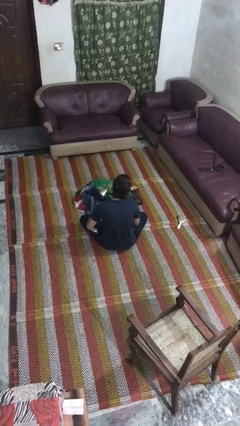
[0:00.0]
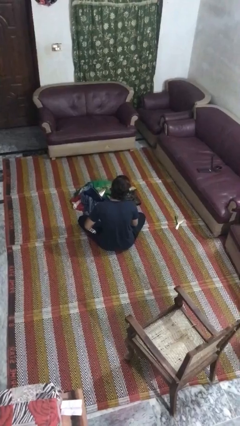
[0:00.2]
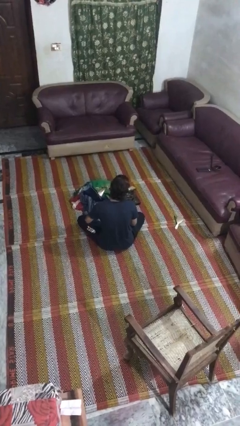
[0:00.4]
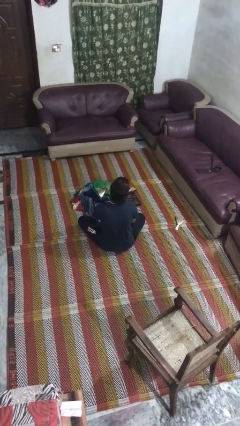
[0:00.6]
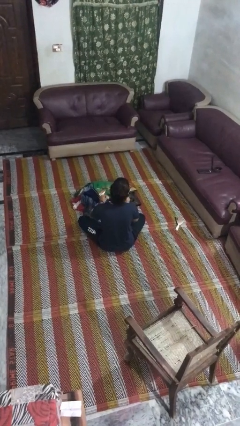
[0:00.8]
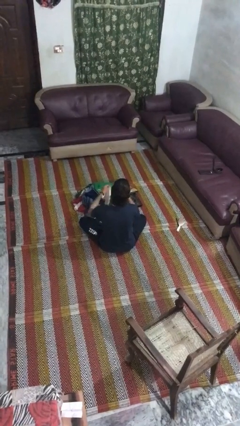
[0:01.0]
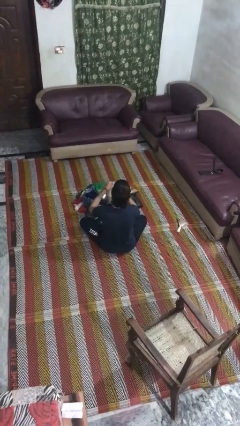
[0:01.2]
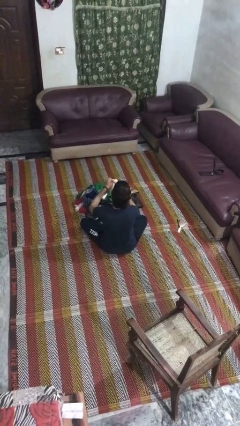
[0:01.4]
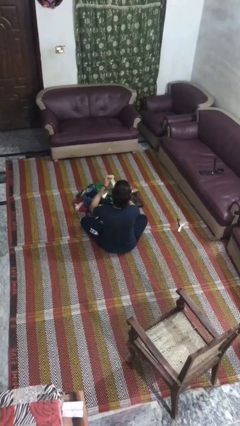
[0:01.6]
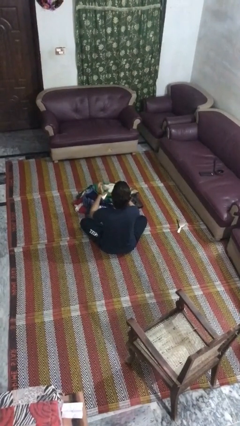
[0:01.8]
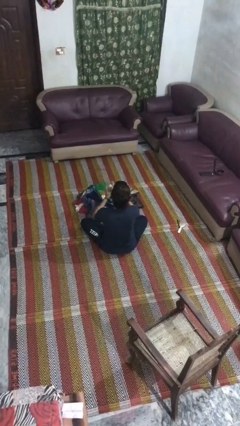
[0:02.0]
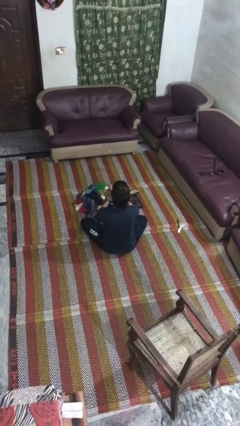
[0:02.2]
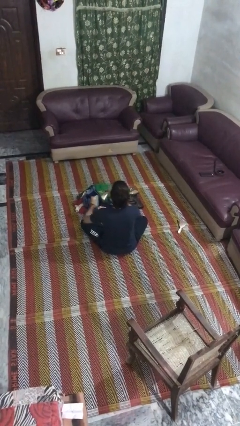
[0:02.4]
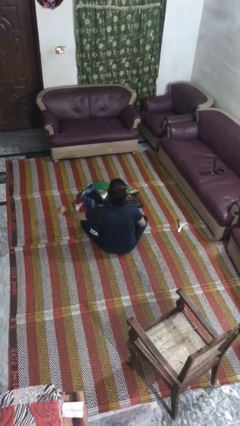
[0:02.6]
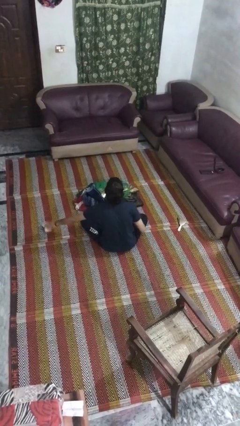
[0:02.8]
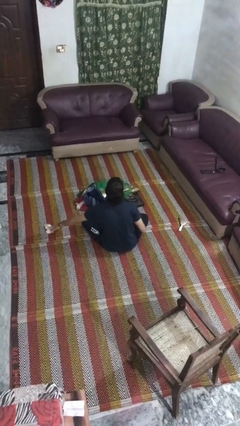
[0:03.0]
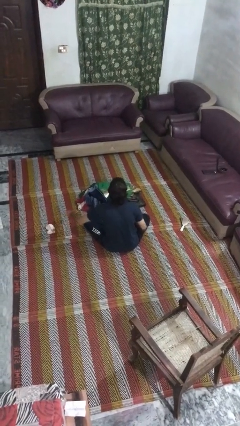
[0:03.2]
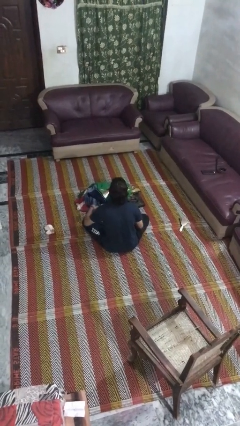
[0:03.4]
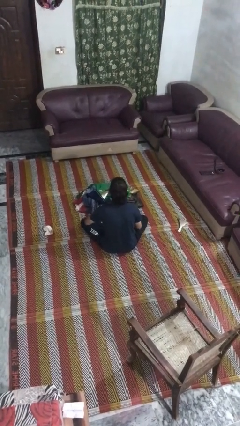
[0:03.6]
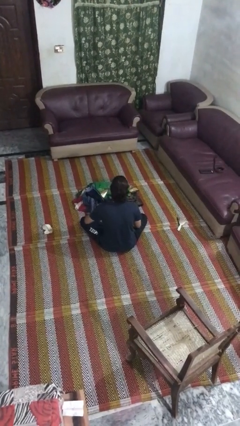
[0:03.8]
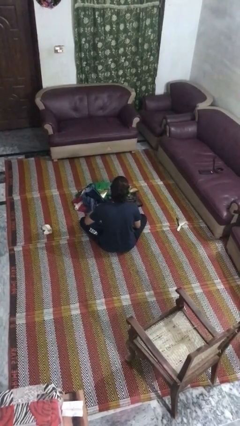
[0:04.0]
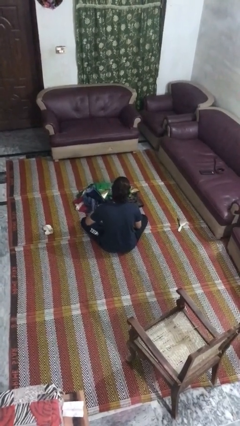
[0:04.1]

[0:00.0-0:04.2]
person folds socks

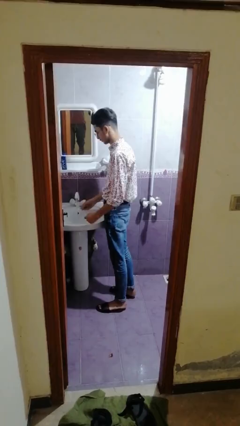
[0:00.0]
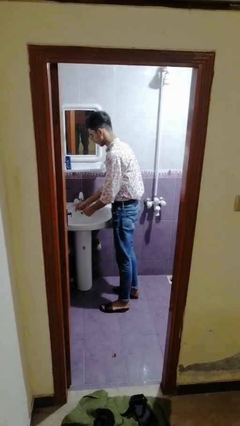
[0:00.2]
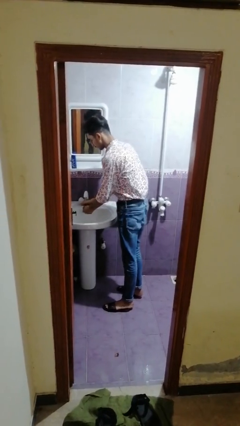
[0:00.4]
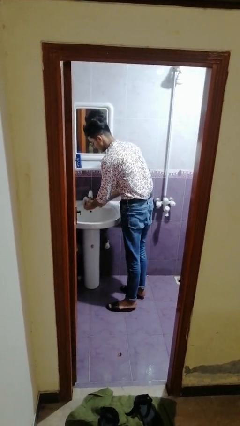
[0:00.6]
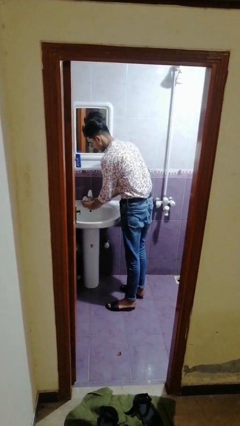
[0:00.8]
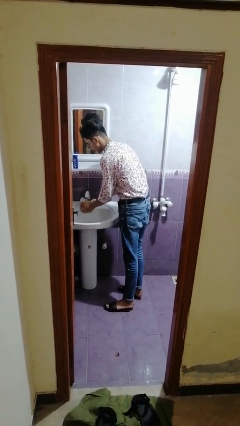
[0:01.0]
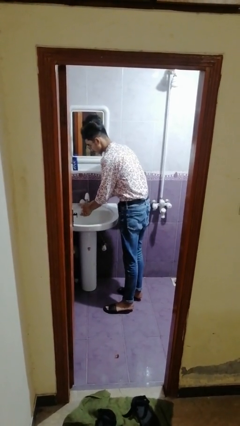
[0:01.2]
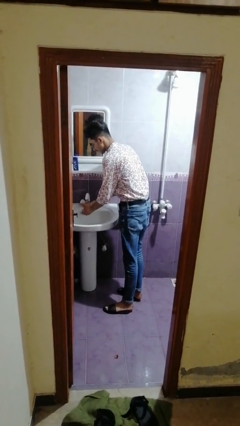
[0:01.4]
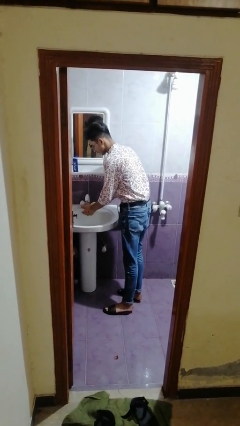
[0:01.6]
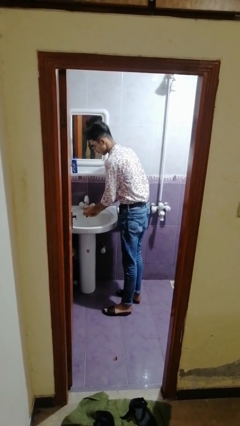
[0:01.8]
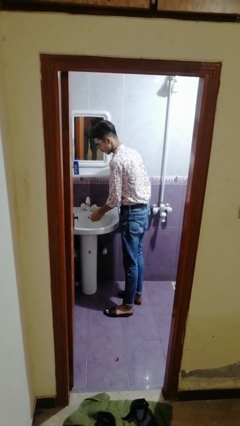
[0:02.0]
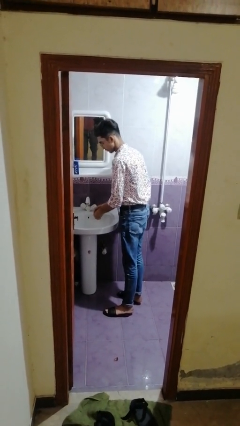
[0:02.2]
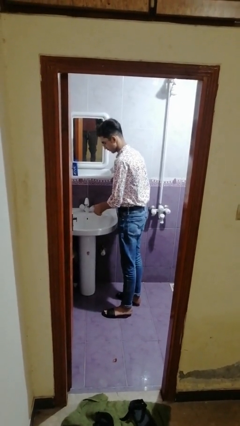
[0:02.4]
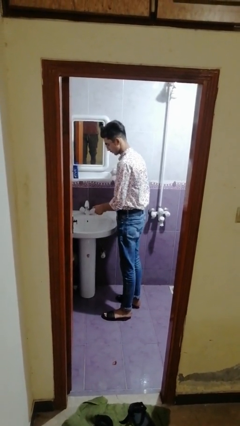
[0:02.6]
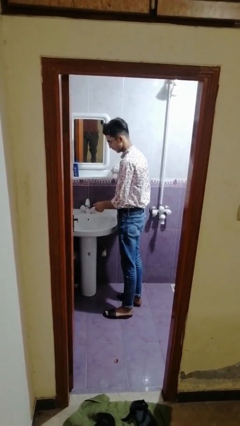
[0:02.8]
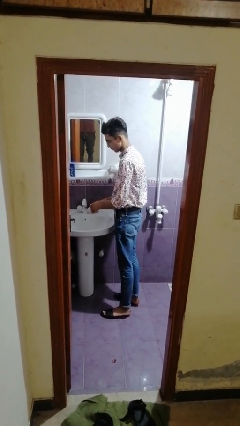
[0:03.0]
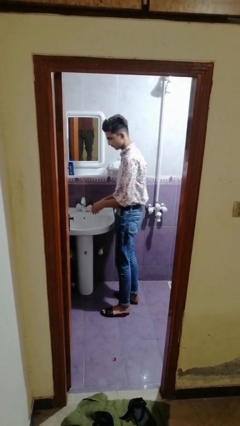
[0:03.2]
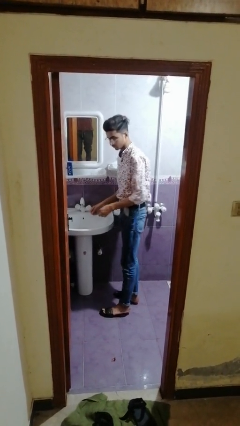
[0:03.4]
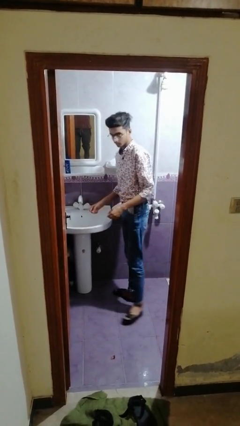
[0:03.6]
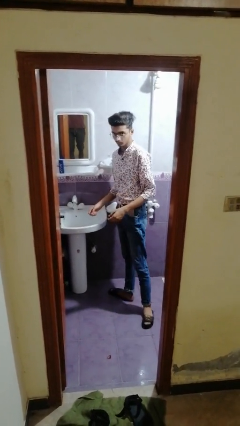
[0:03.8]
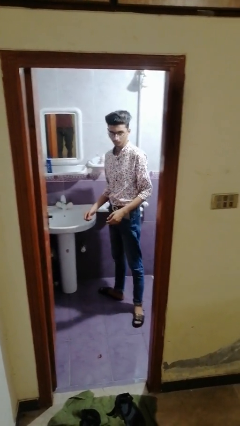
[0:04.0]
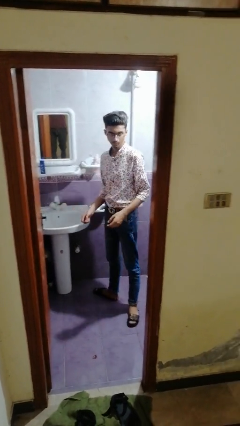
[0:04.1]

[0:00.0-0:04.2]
person washes hands

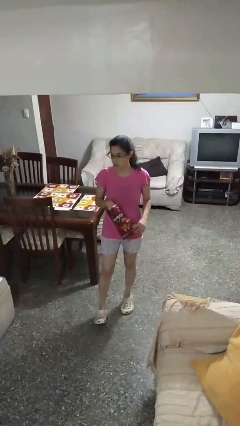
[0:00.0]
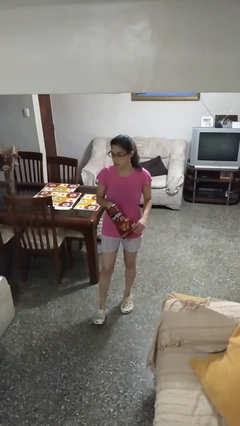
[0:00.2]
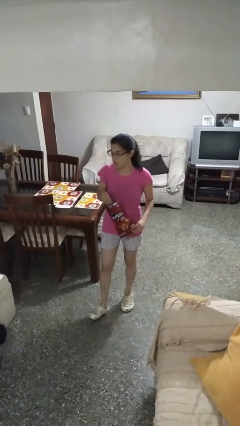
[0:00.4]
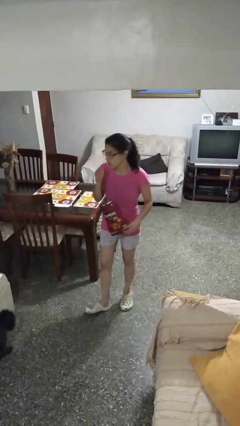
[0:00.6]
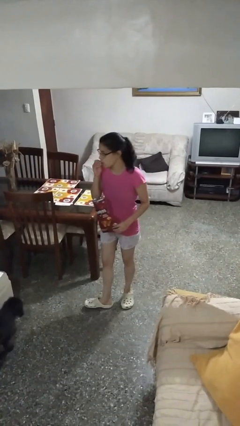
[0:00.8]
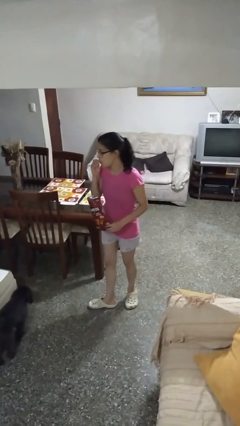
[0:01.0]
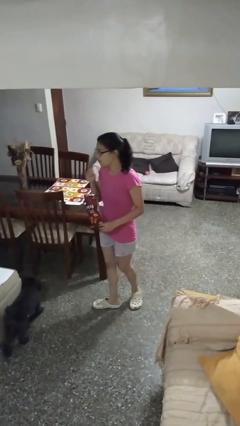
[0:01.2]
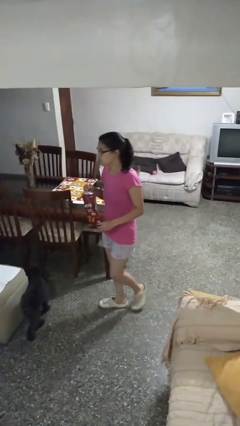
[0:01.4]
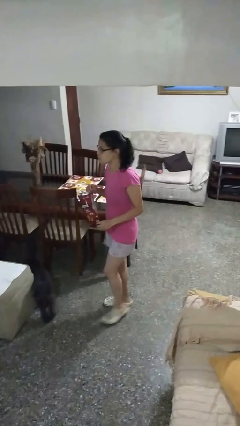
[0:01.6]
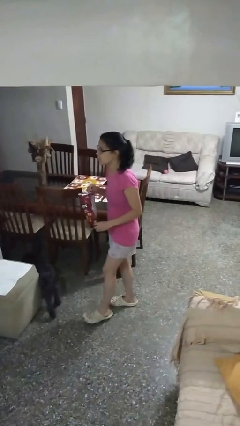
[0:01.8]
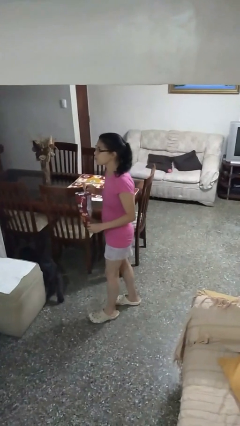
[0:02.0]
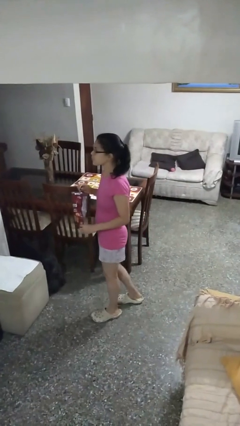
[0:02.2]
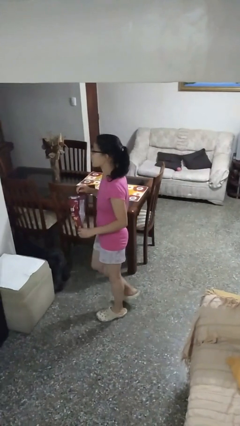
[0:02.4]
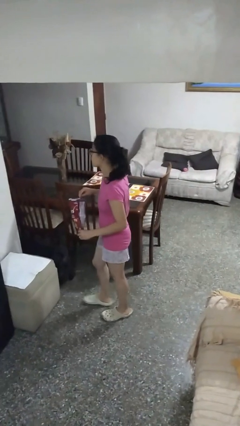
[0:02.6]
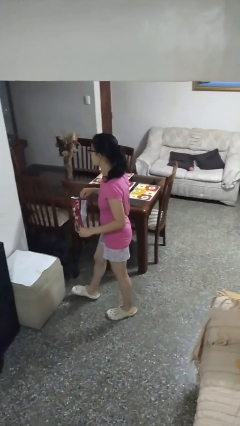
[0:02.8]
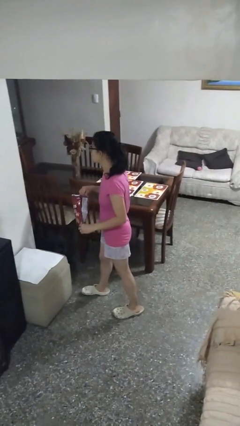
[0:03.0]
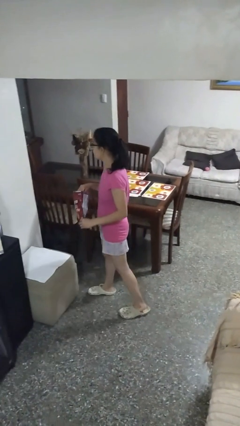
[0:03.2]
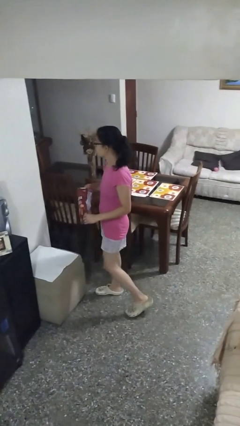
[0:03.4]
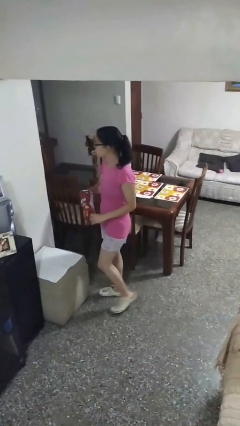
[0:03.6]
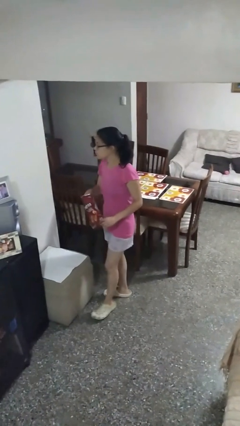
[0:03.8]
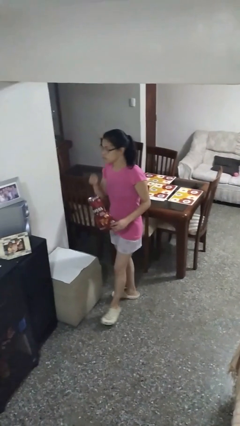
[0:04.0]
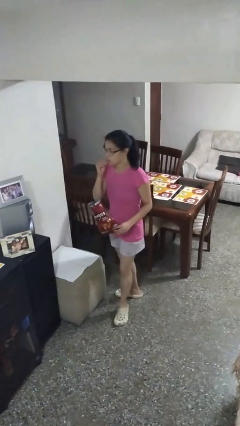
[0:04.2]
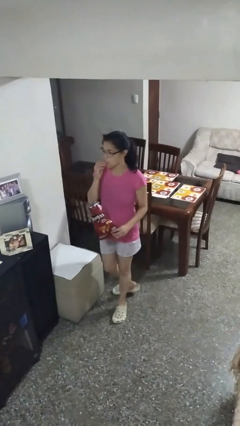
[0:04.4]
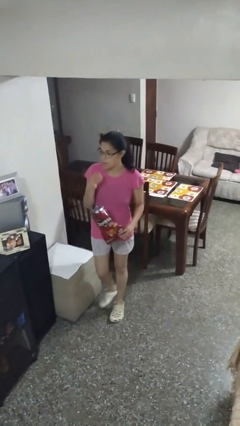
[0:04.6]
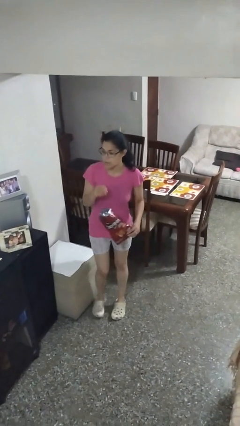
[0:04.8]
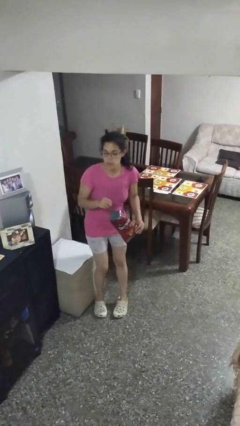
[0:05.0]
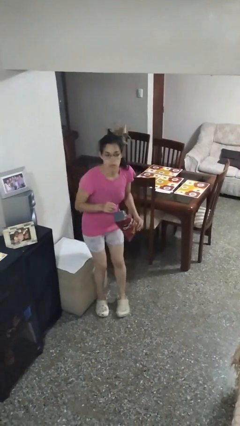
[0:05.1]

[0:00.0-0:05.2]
person eats snack from bag

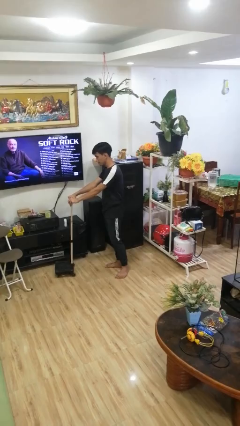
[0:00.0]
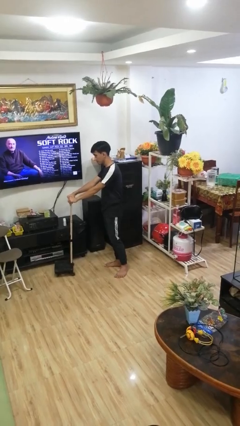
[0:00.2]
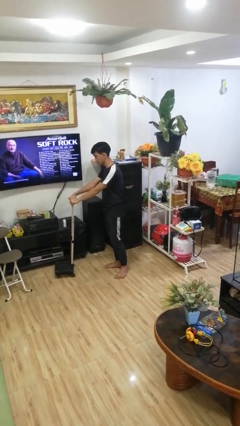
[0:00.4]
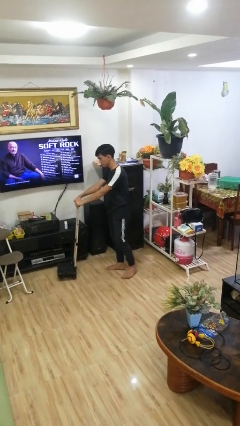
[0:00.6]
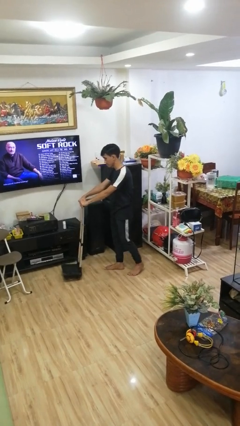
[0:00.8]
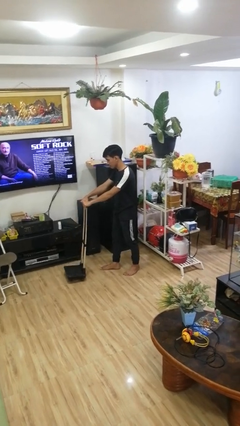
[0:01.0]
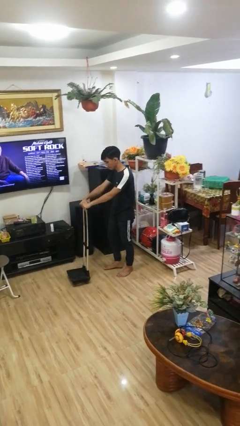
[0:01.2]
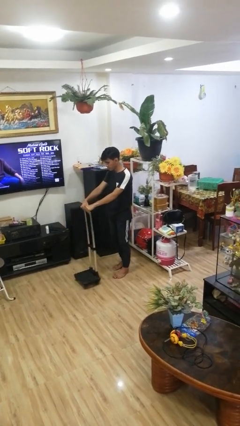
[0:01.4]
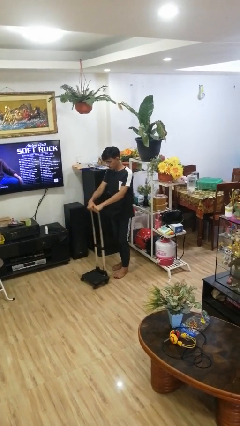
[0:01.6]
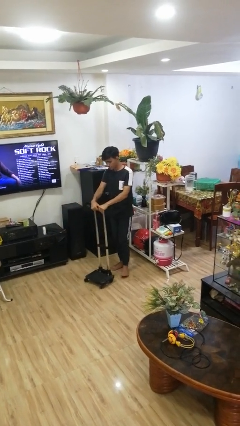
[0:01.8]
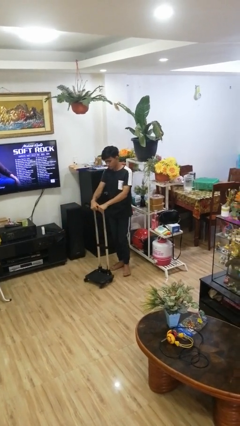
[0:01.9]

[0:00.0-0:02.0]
person pulls wheeled cart

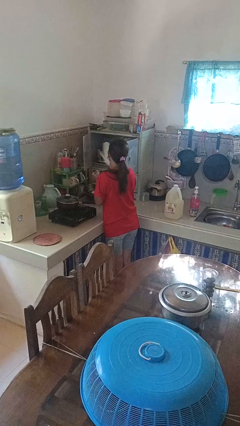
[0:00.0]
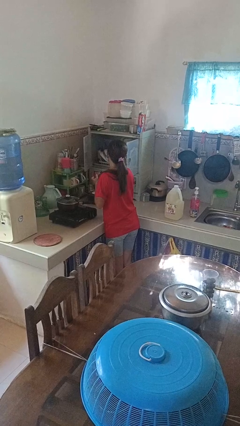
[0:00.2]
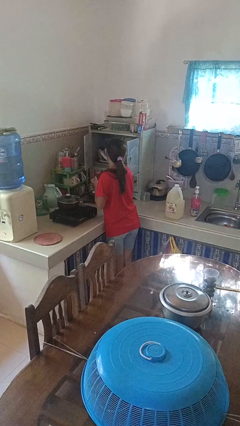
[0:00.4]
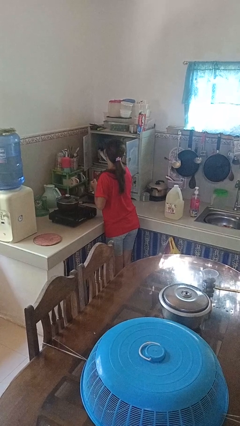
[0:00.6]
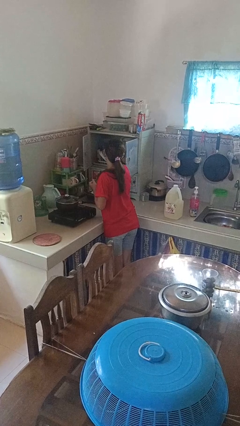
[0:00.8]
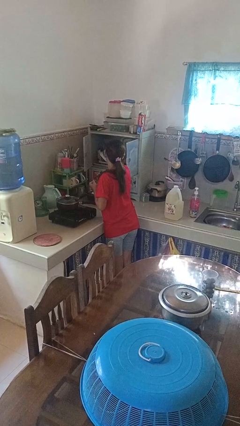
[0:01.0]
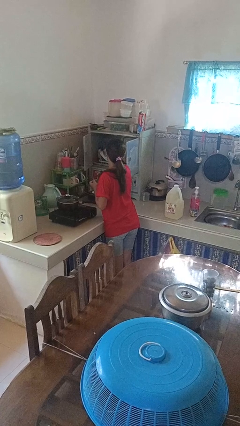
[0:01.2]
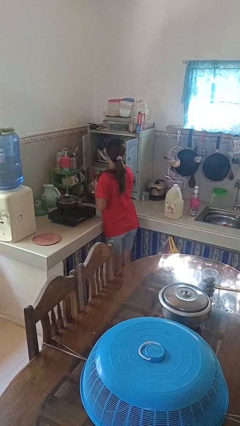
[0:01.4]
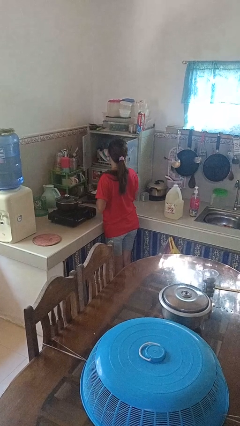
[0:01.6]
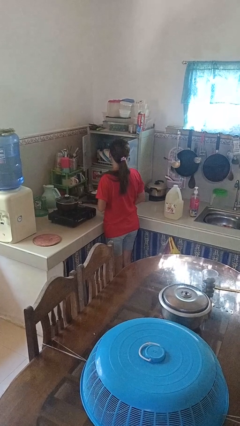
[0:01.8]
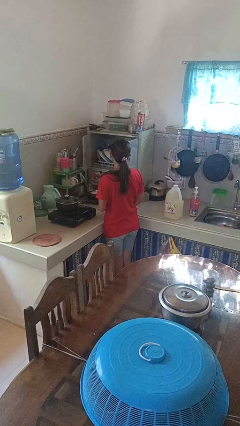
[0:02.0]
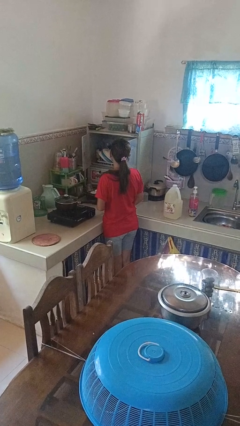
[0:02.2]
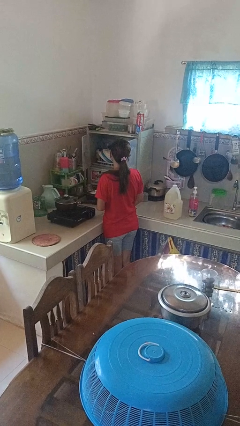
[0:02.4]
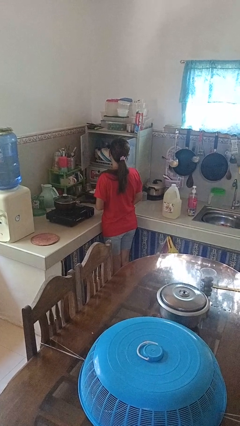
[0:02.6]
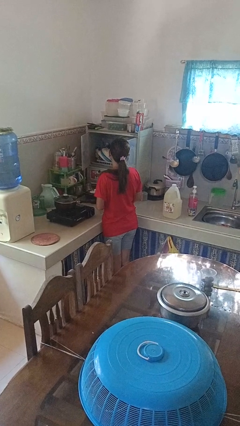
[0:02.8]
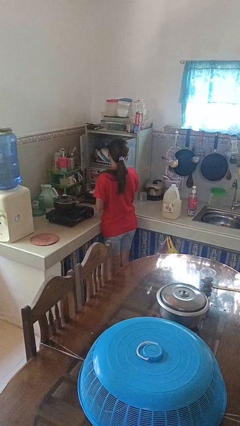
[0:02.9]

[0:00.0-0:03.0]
person puts object in cabinet
